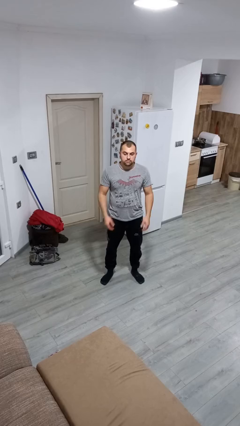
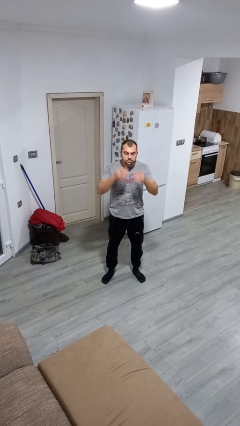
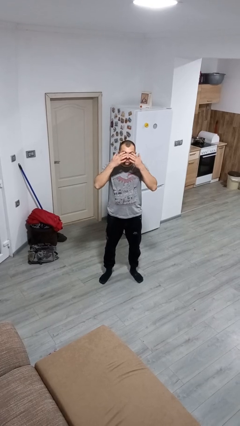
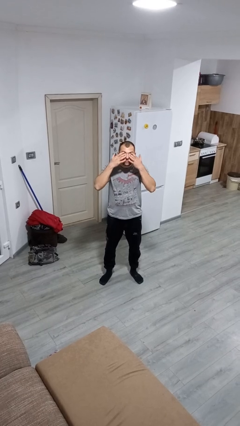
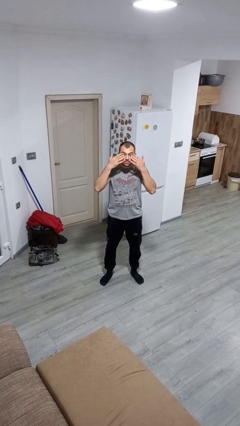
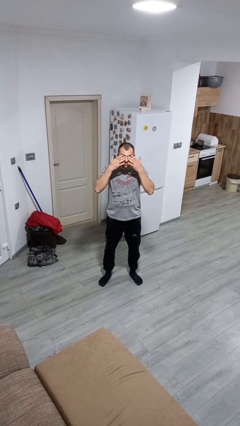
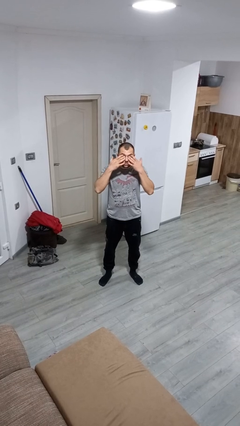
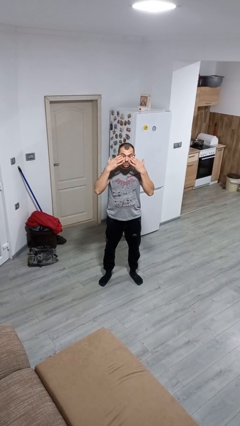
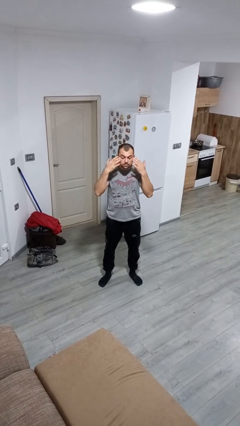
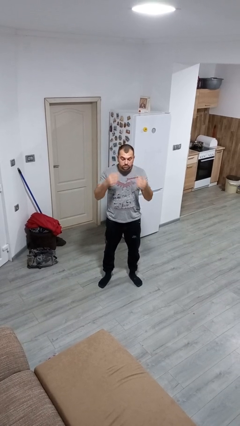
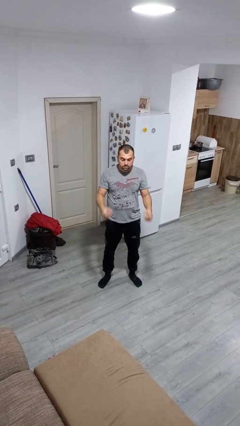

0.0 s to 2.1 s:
person rubs eyes

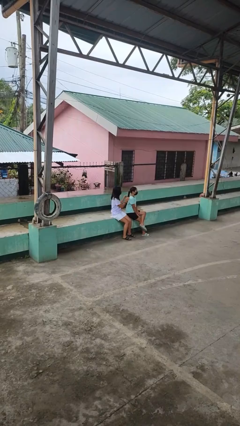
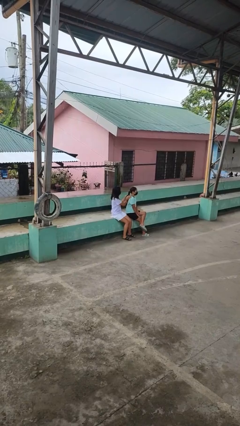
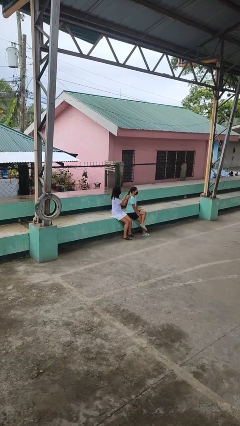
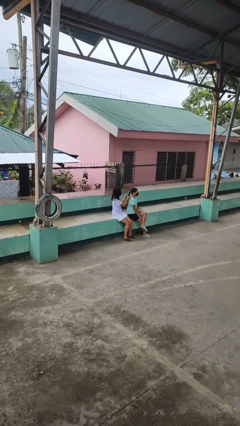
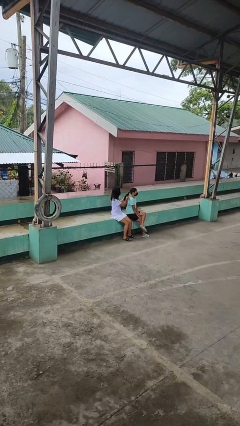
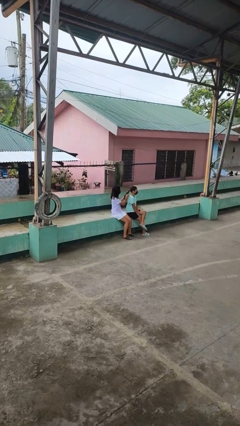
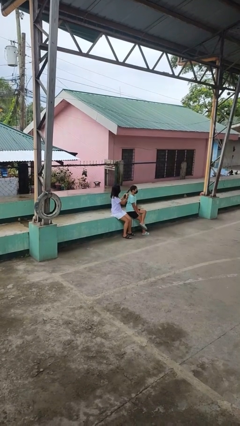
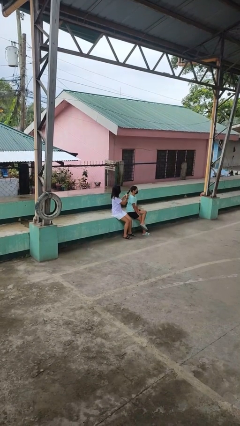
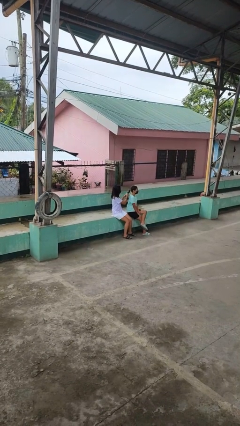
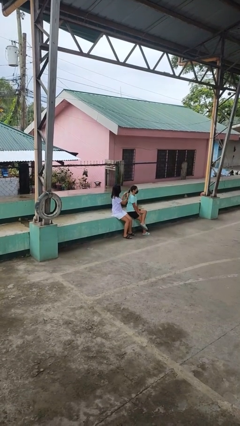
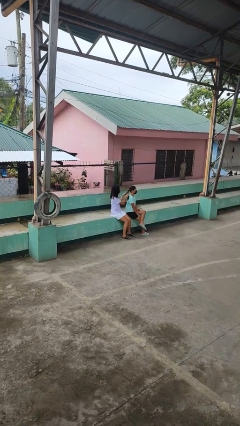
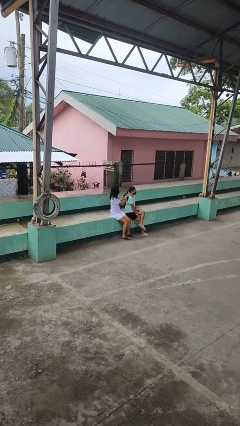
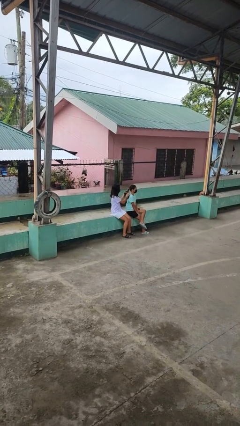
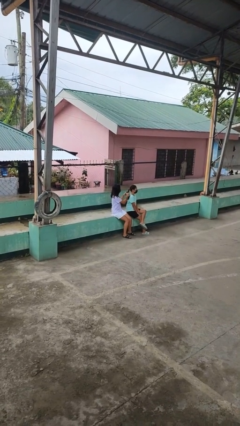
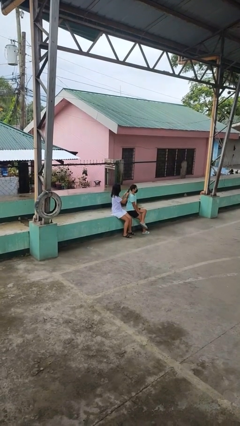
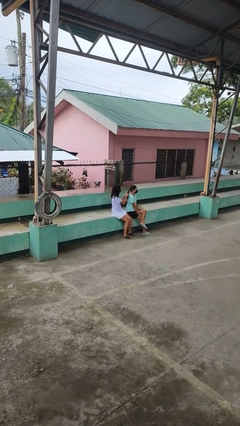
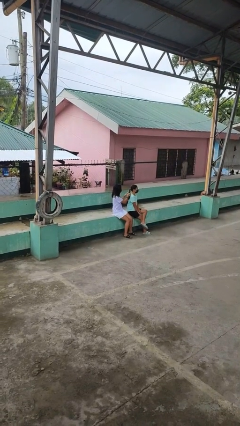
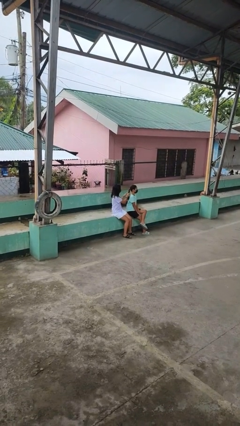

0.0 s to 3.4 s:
person braids hair of person

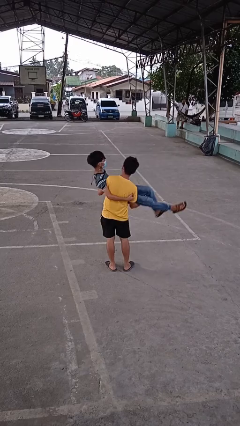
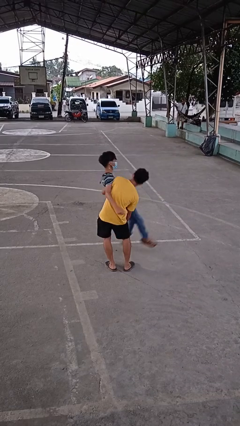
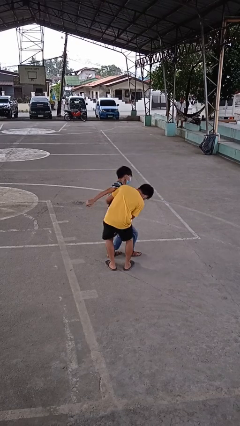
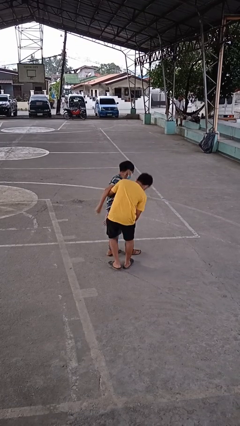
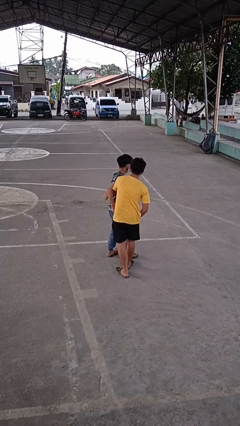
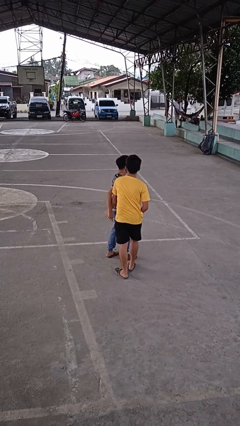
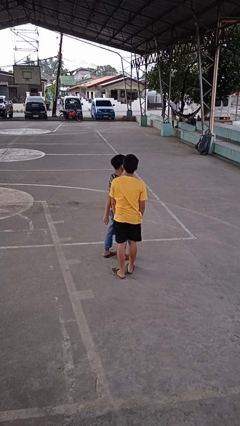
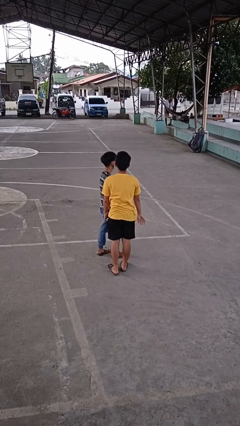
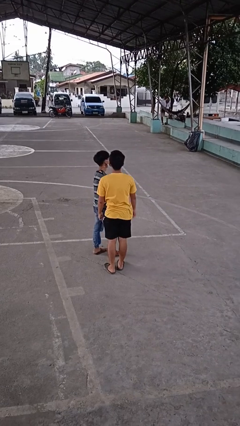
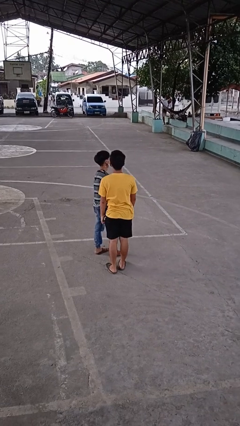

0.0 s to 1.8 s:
person puts down person

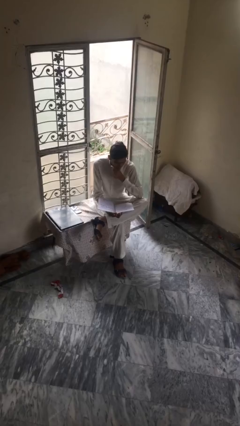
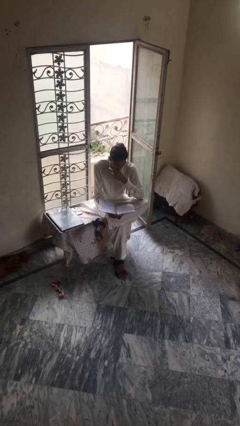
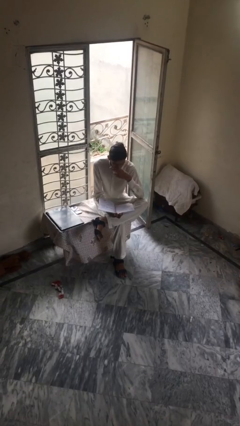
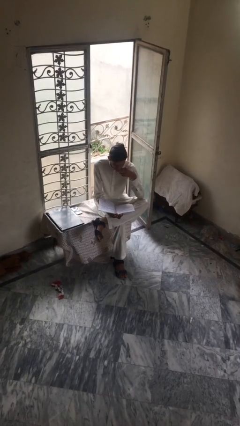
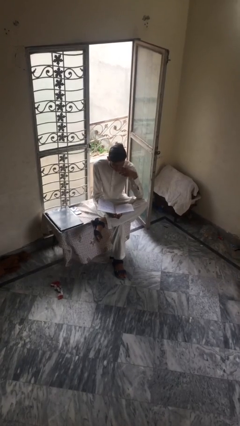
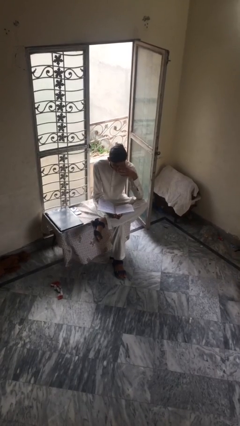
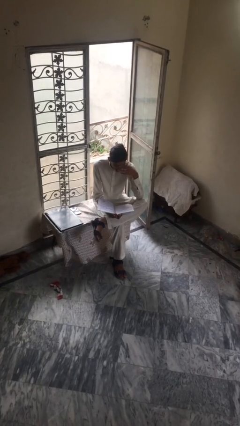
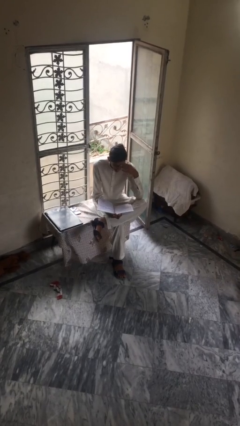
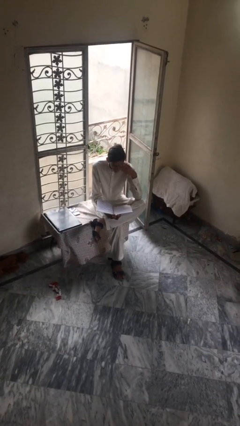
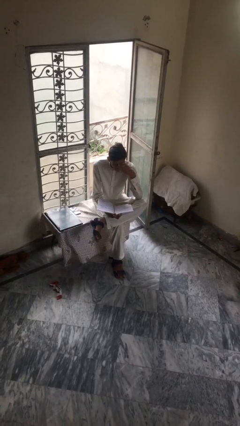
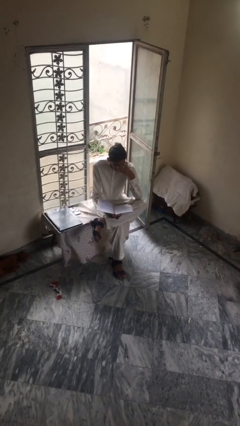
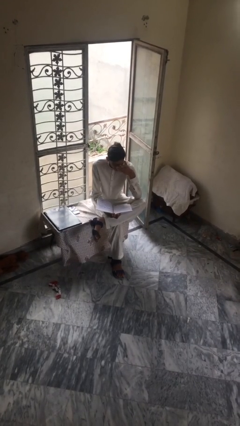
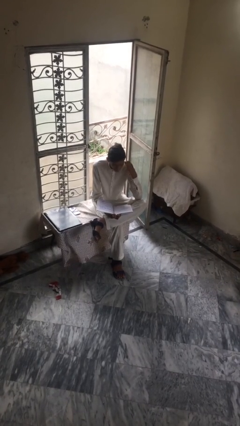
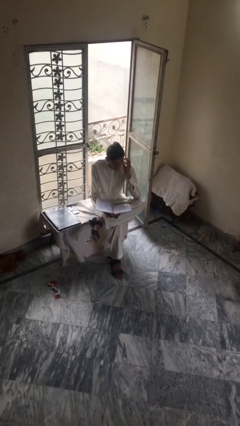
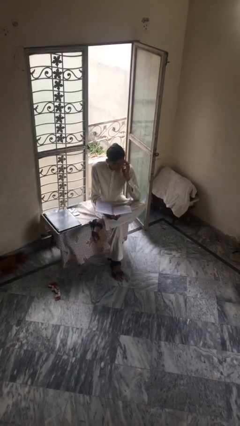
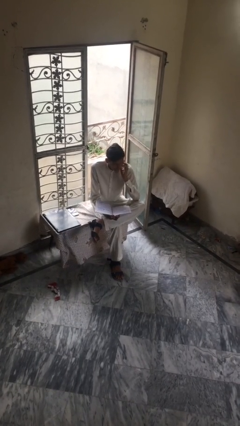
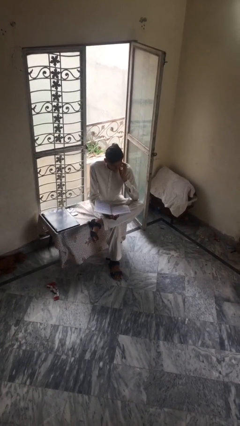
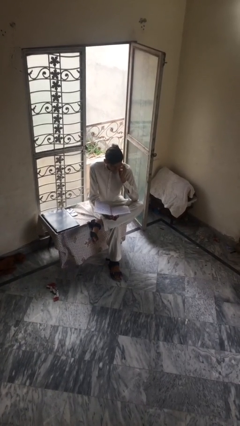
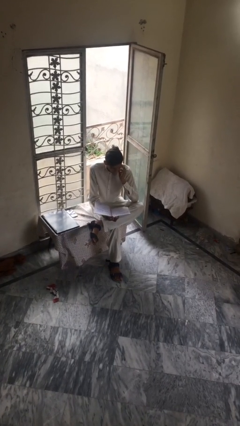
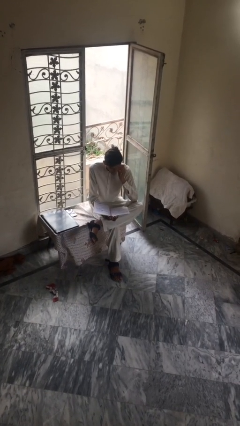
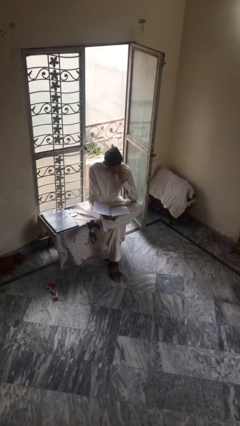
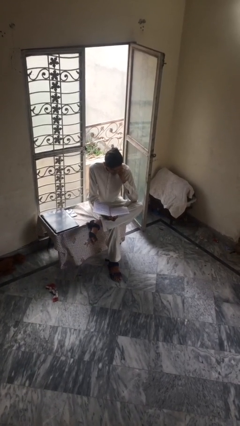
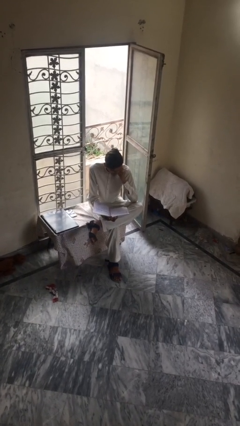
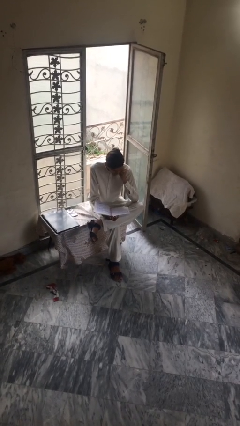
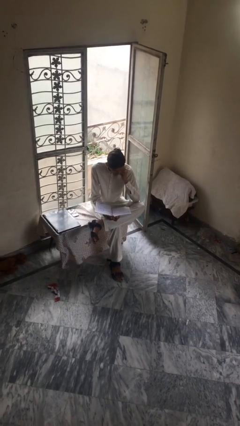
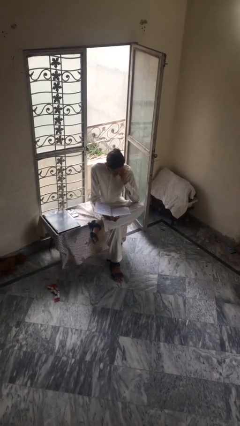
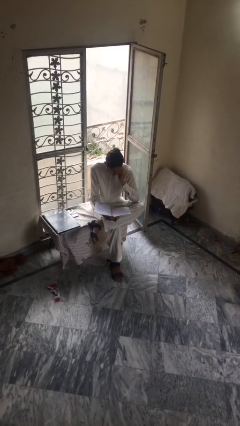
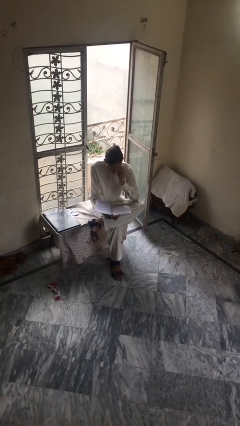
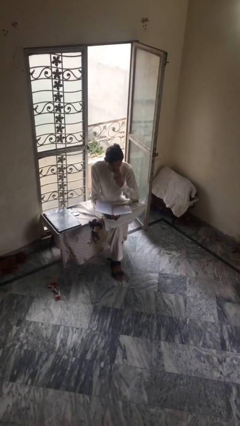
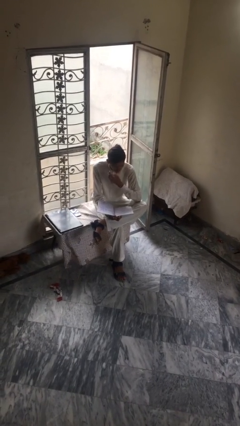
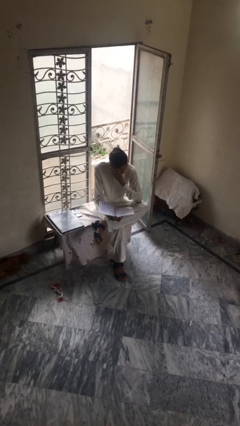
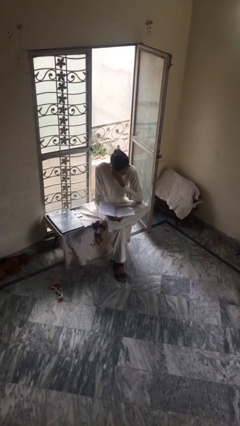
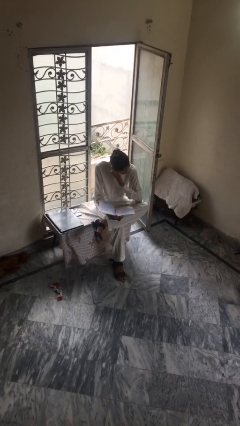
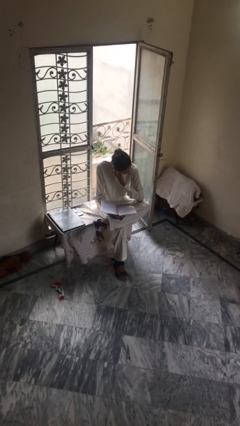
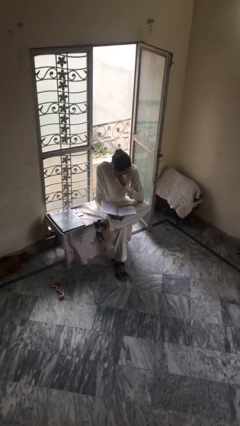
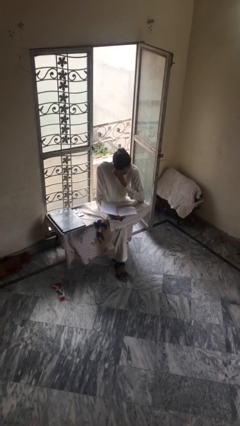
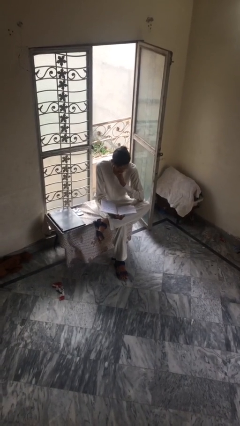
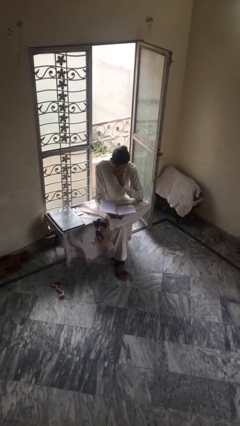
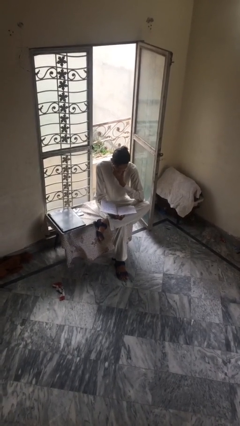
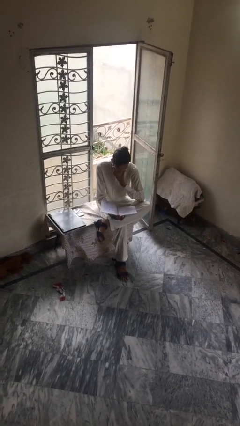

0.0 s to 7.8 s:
person reads document

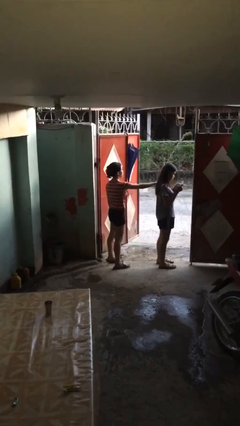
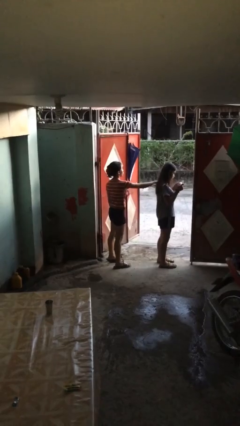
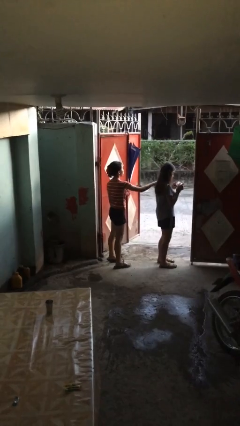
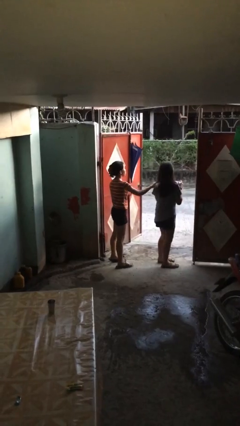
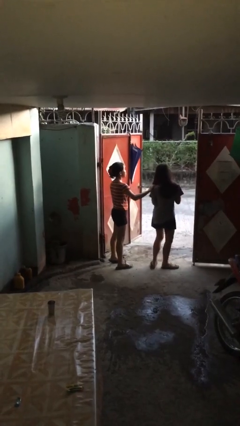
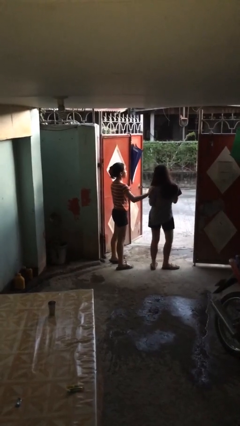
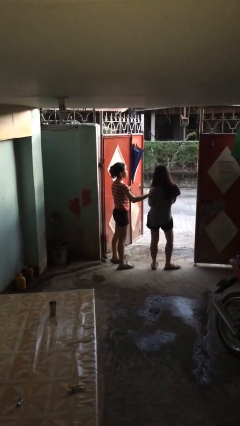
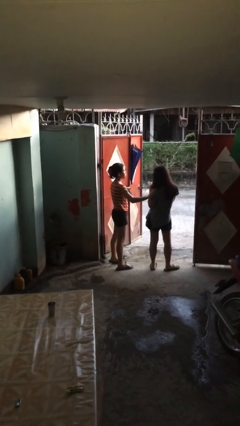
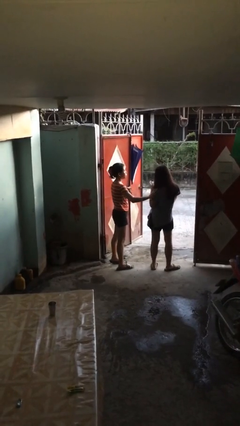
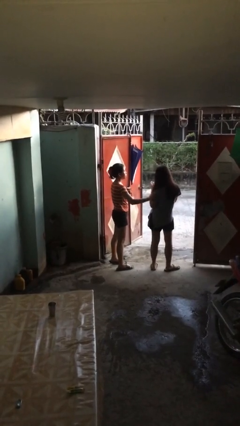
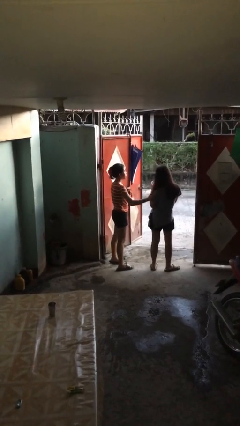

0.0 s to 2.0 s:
person spins person around
